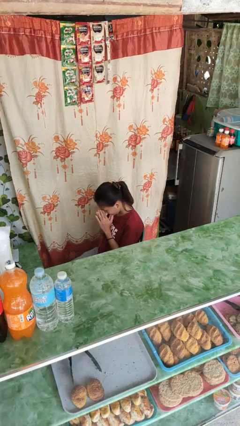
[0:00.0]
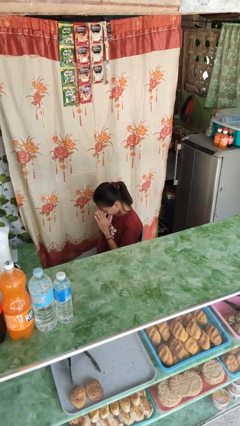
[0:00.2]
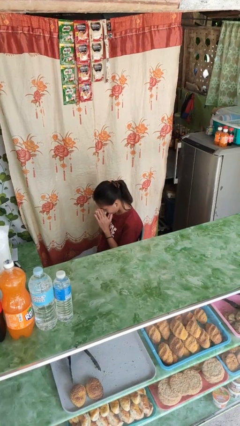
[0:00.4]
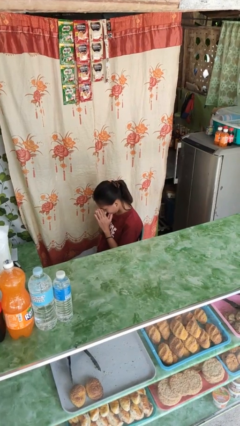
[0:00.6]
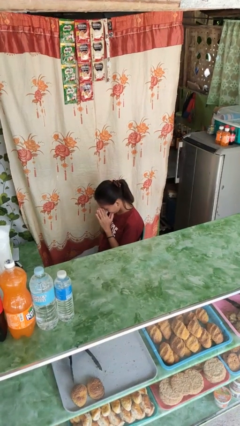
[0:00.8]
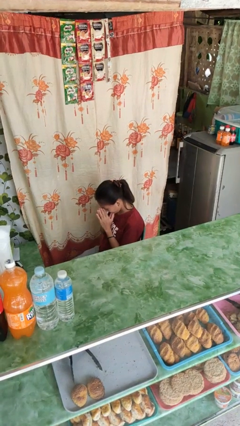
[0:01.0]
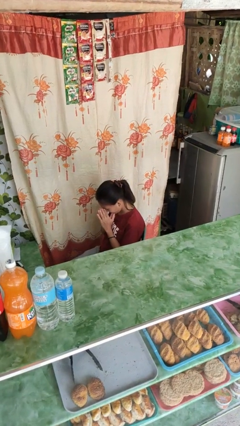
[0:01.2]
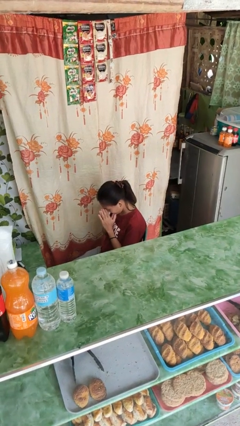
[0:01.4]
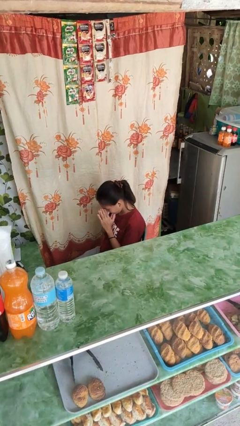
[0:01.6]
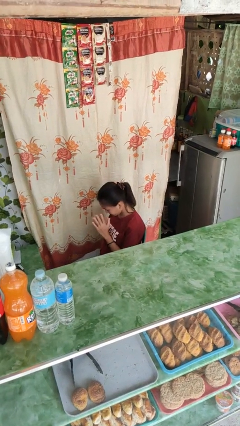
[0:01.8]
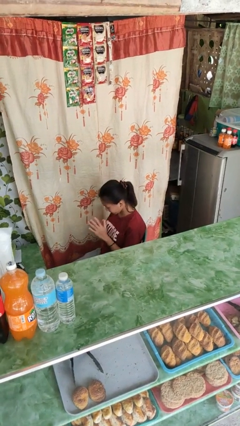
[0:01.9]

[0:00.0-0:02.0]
person rubs eyes

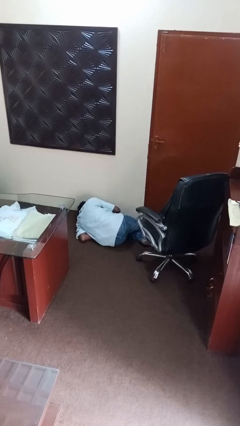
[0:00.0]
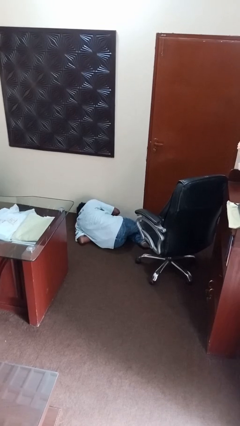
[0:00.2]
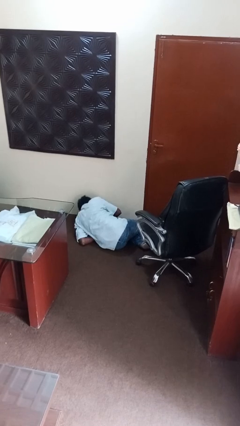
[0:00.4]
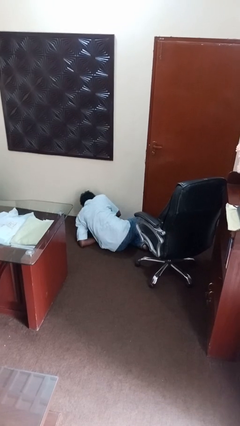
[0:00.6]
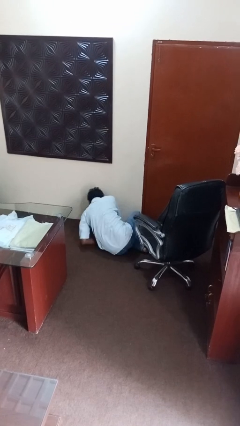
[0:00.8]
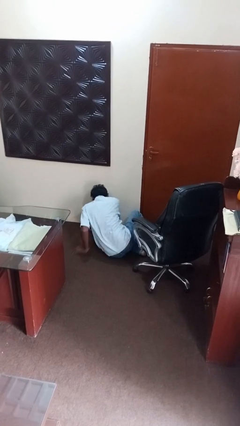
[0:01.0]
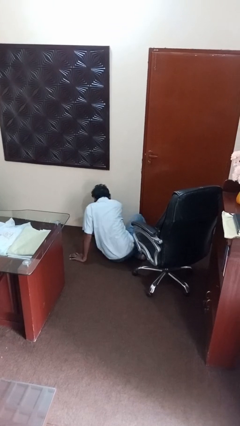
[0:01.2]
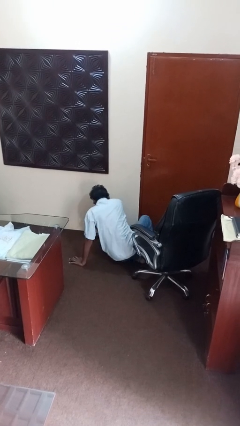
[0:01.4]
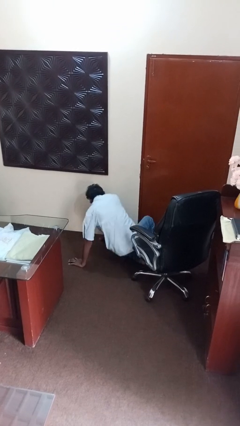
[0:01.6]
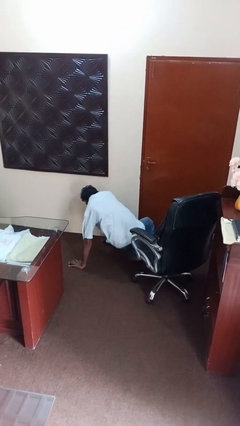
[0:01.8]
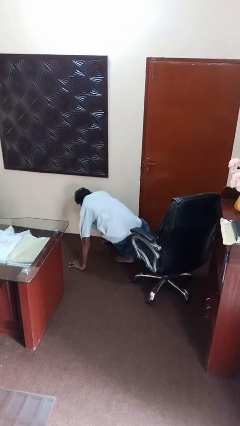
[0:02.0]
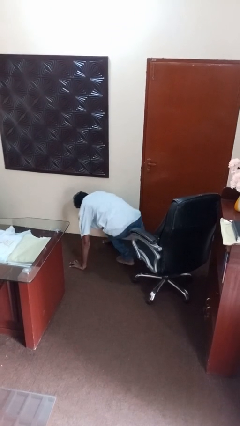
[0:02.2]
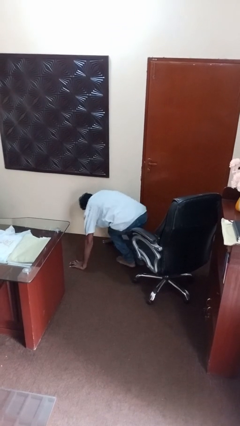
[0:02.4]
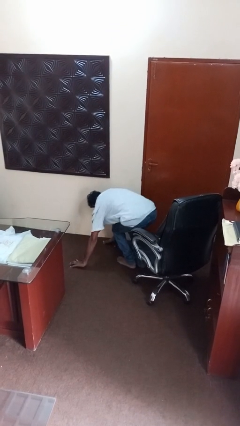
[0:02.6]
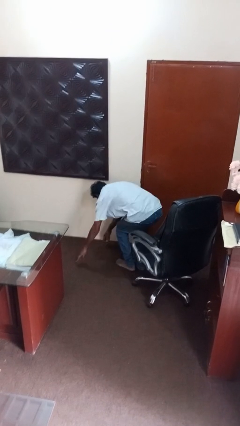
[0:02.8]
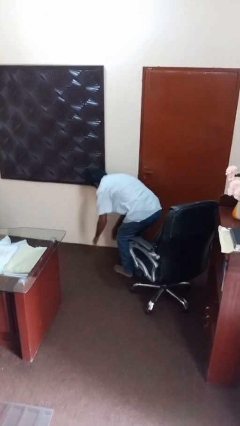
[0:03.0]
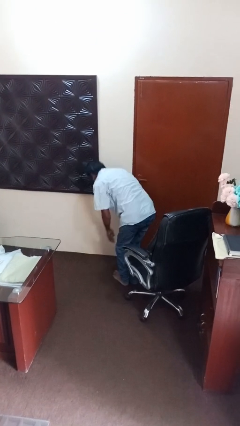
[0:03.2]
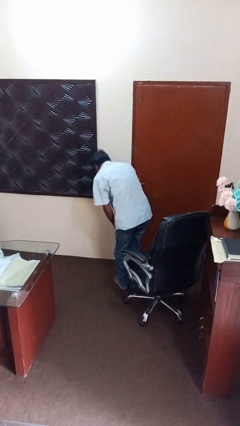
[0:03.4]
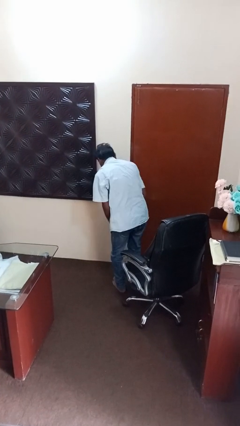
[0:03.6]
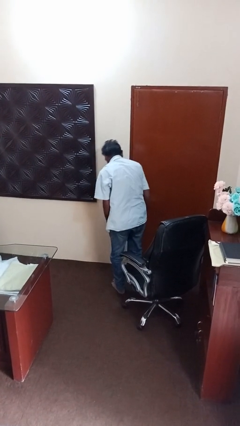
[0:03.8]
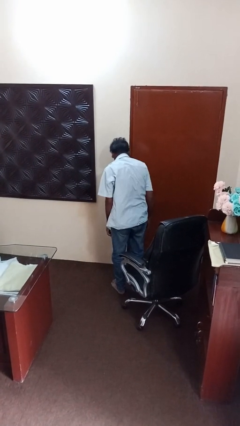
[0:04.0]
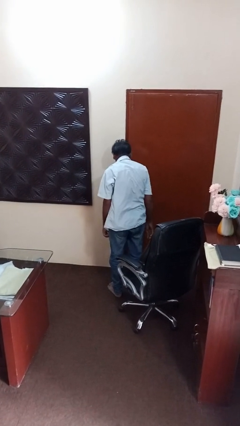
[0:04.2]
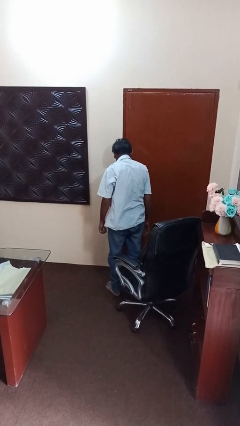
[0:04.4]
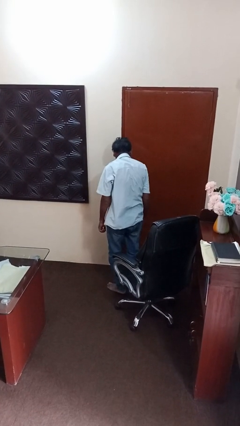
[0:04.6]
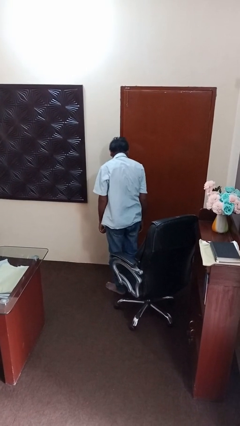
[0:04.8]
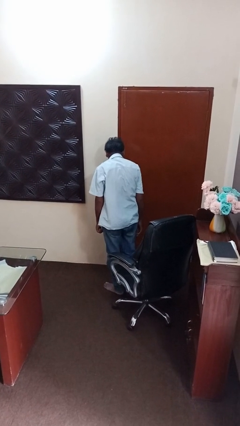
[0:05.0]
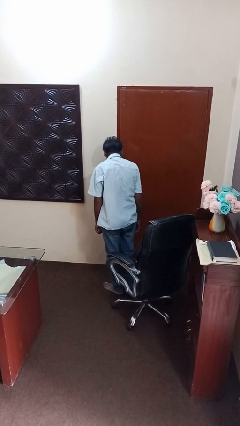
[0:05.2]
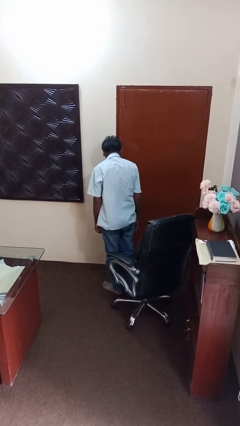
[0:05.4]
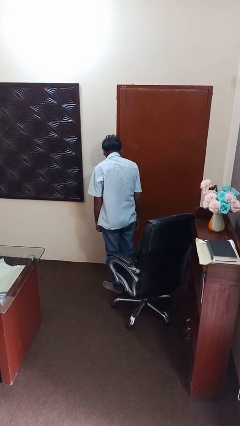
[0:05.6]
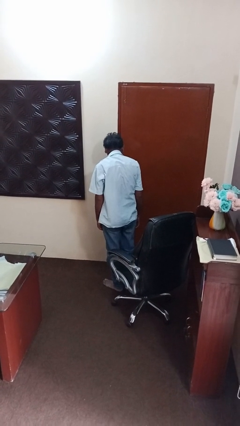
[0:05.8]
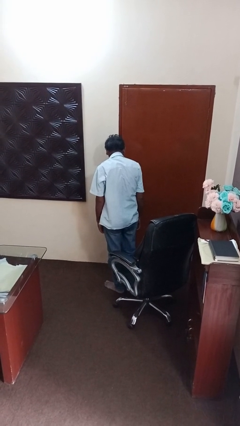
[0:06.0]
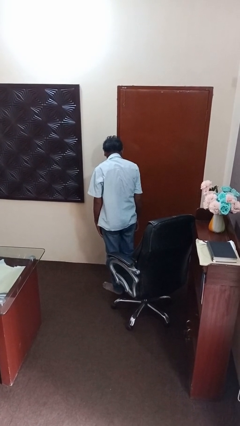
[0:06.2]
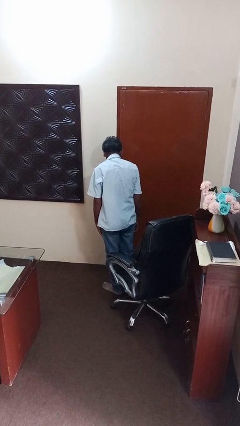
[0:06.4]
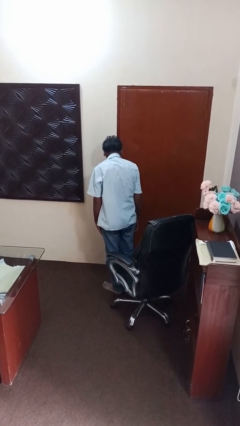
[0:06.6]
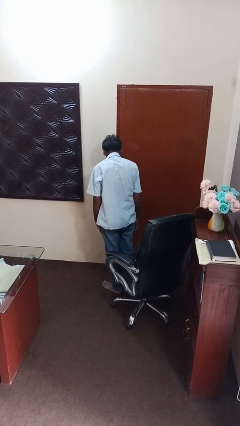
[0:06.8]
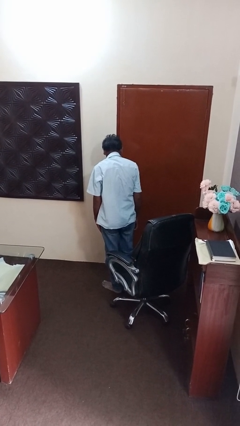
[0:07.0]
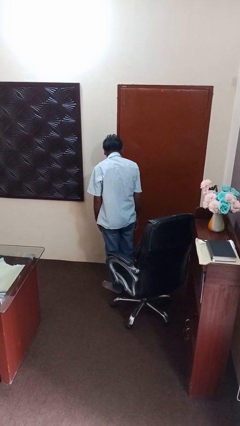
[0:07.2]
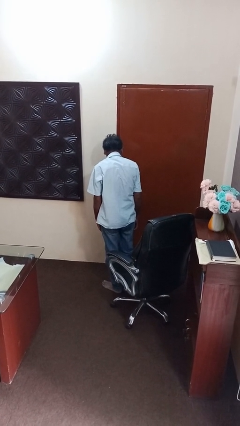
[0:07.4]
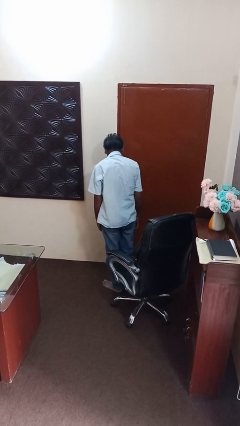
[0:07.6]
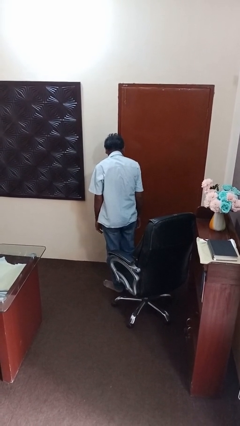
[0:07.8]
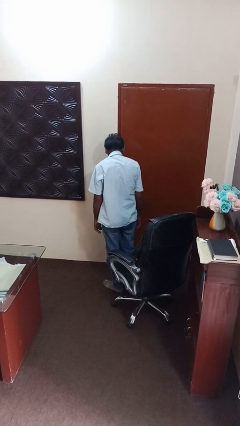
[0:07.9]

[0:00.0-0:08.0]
person stands up from floor

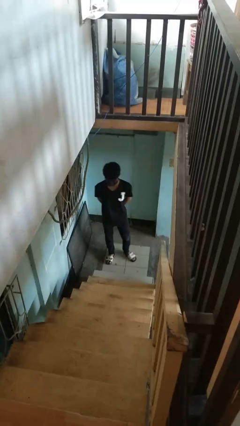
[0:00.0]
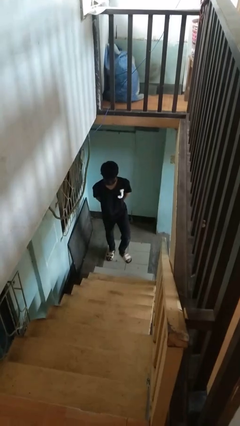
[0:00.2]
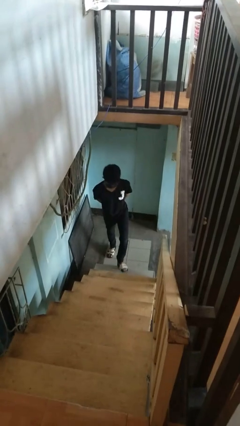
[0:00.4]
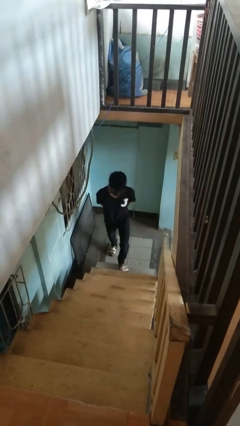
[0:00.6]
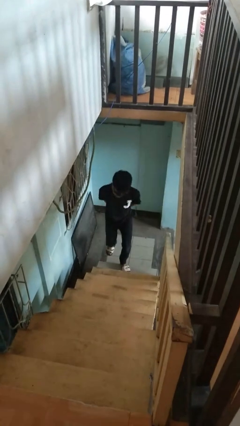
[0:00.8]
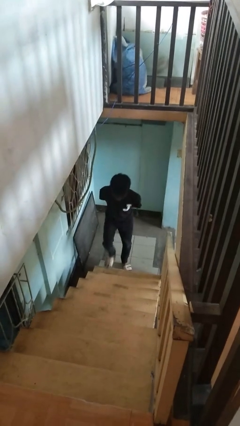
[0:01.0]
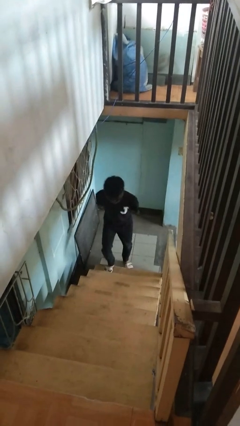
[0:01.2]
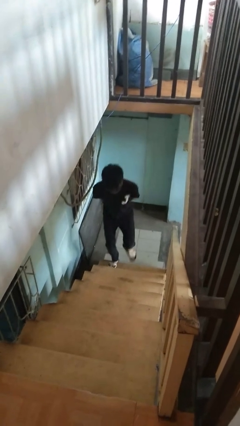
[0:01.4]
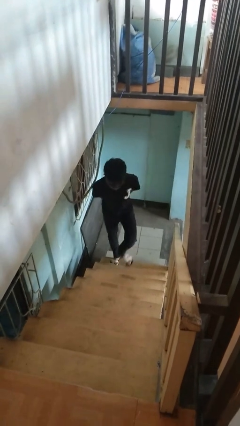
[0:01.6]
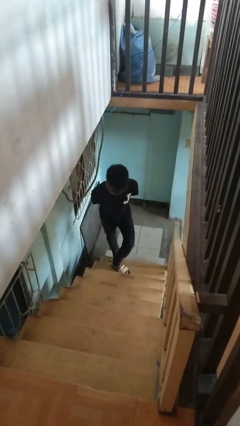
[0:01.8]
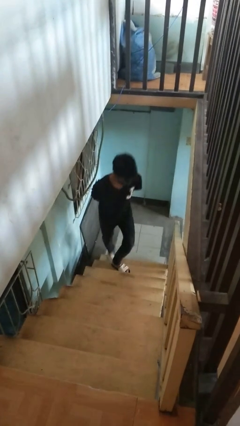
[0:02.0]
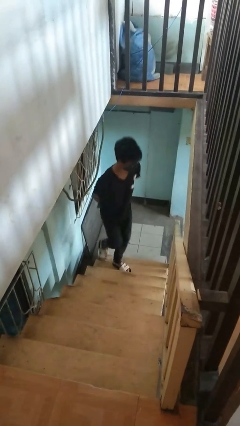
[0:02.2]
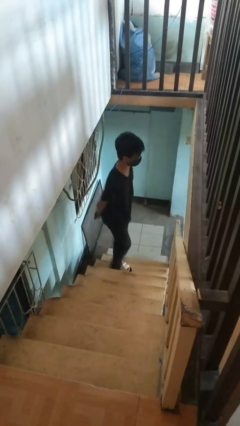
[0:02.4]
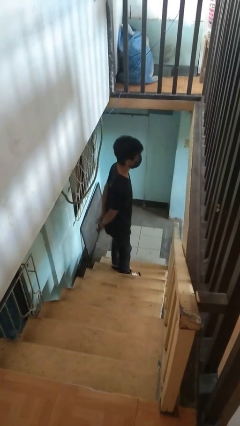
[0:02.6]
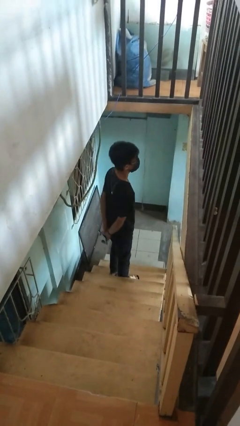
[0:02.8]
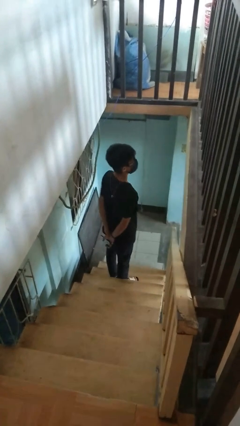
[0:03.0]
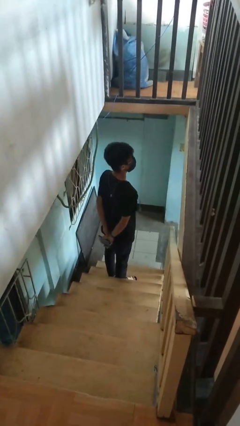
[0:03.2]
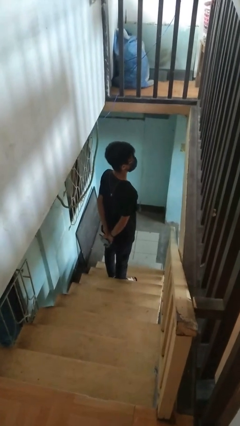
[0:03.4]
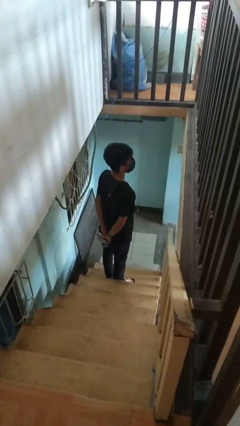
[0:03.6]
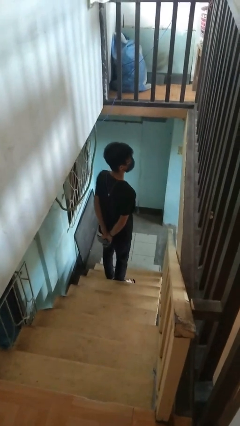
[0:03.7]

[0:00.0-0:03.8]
person climbs up ladder

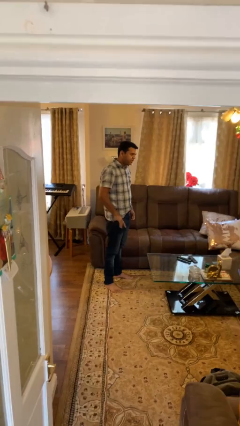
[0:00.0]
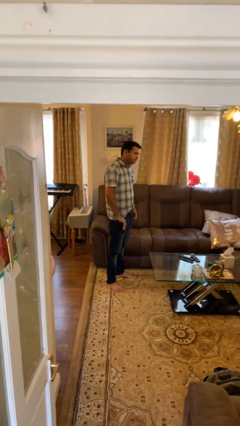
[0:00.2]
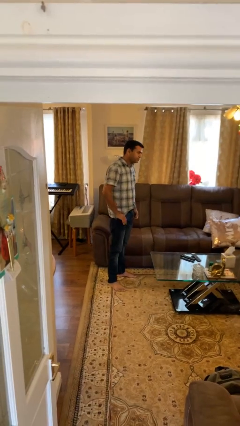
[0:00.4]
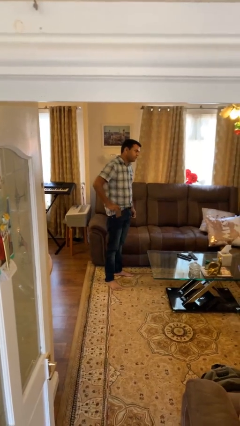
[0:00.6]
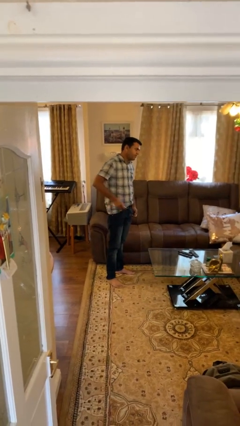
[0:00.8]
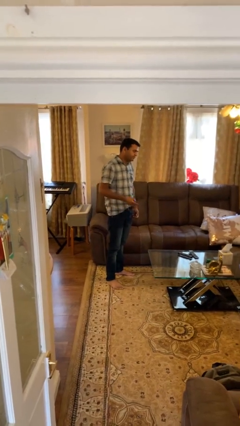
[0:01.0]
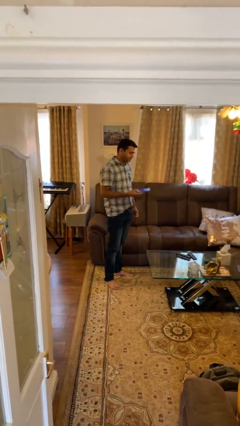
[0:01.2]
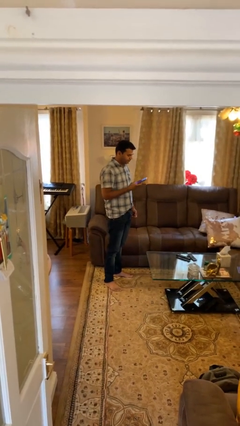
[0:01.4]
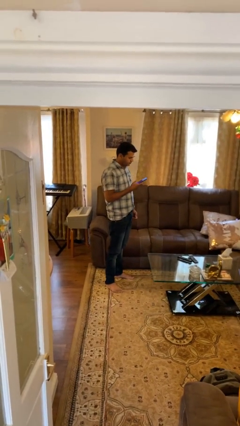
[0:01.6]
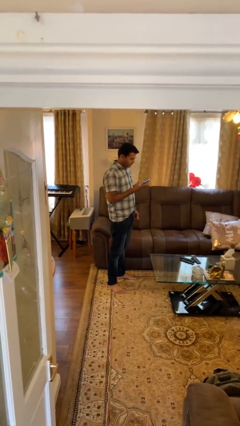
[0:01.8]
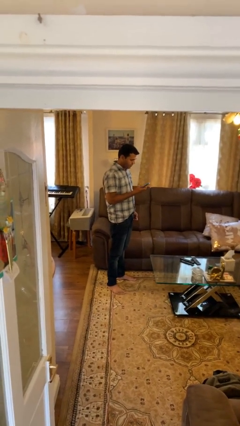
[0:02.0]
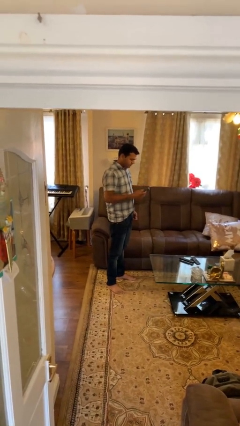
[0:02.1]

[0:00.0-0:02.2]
person takes phone from pocket

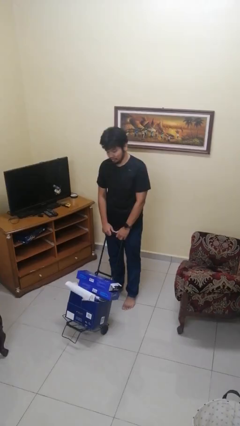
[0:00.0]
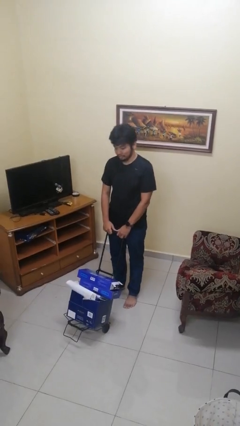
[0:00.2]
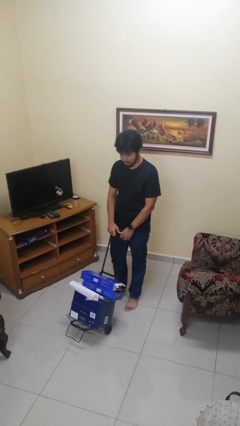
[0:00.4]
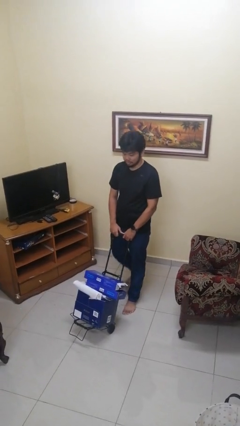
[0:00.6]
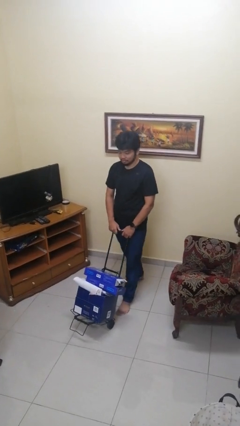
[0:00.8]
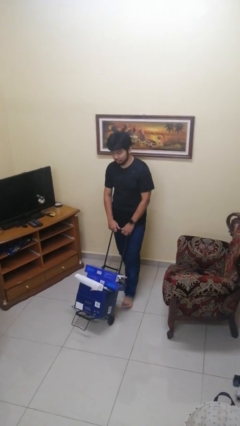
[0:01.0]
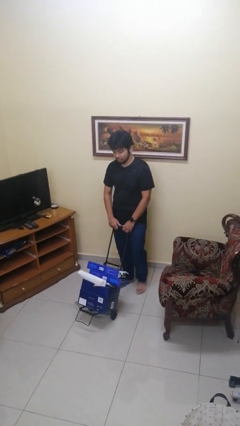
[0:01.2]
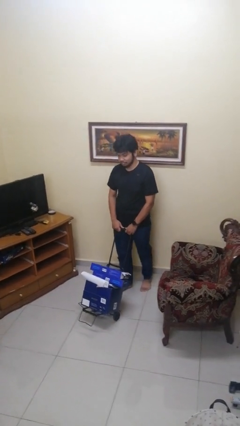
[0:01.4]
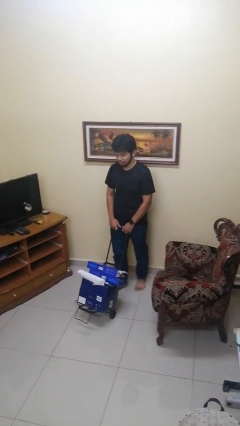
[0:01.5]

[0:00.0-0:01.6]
person pulls wheeled cart
